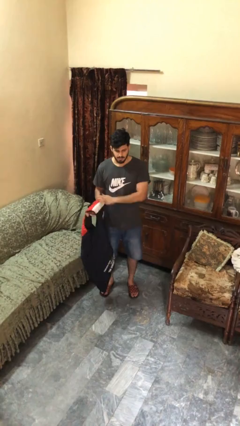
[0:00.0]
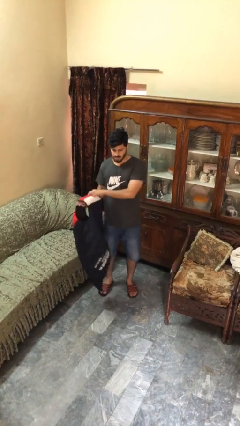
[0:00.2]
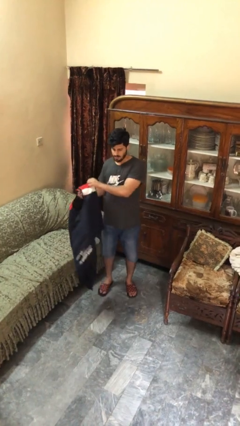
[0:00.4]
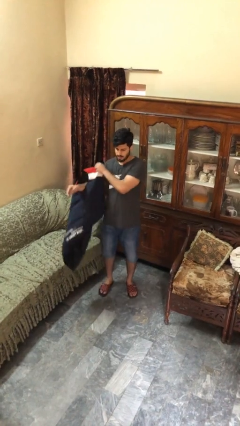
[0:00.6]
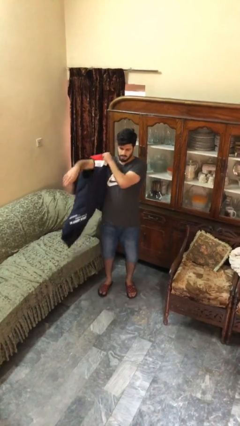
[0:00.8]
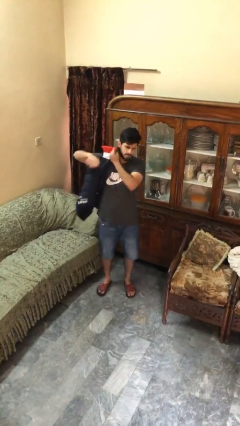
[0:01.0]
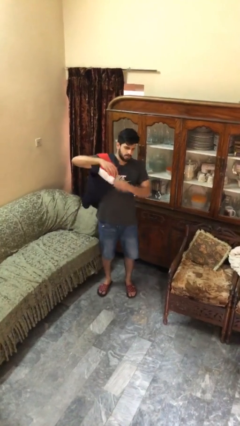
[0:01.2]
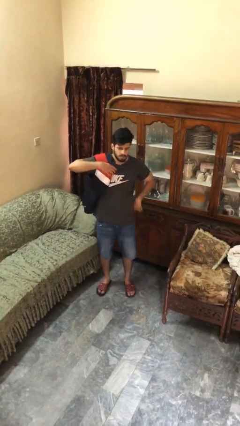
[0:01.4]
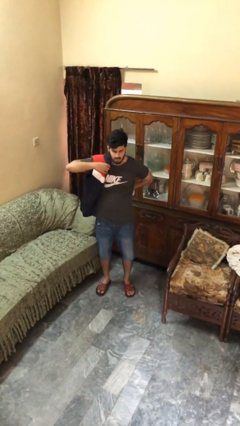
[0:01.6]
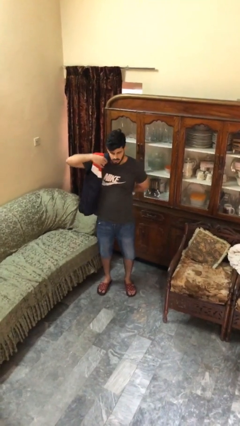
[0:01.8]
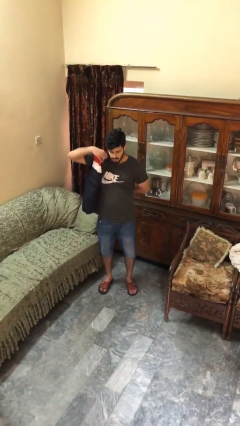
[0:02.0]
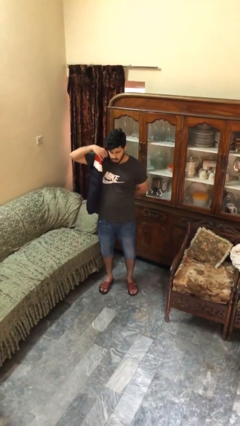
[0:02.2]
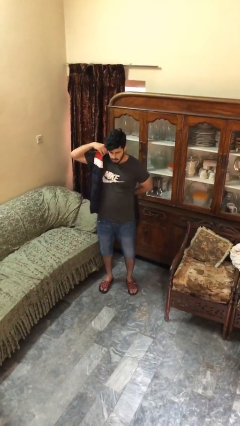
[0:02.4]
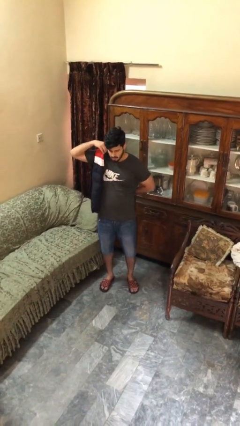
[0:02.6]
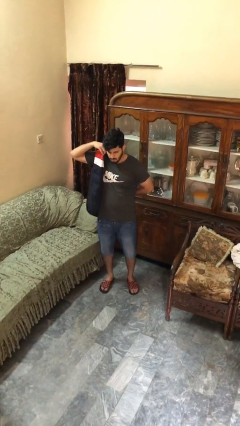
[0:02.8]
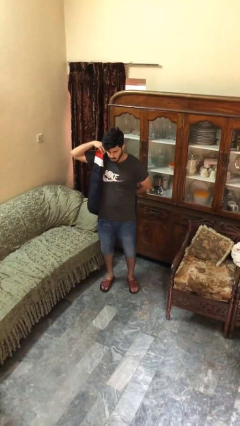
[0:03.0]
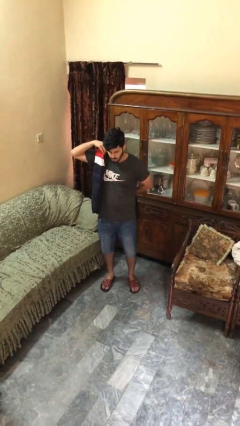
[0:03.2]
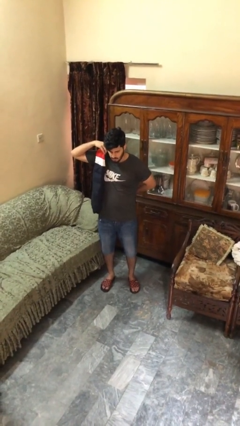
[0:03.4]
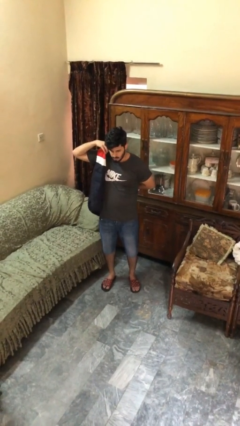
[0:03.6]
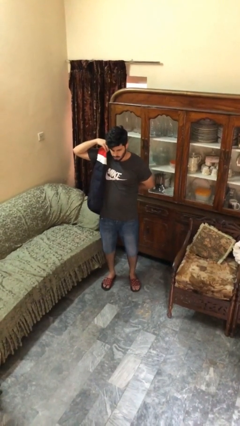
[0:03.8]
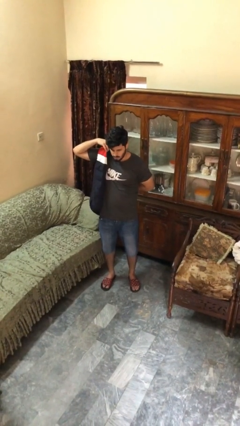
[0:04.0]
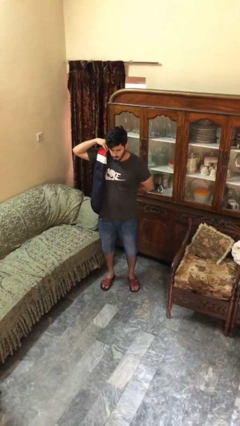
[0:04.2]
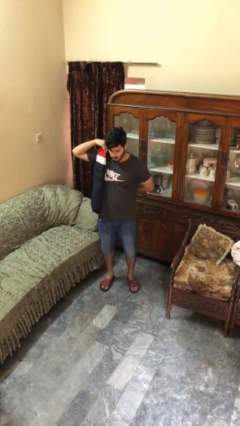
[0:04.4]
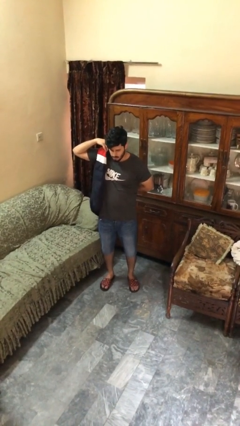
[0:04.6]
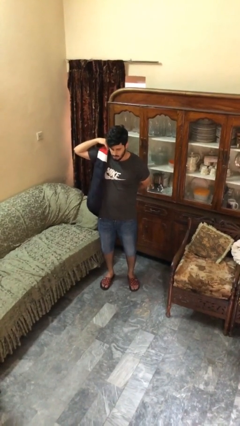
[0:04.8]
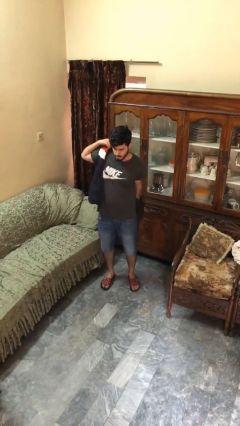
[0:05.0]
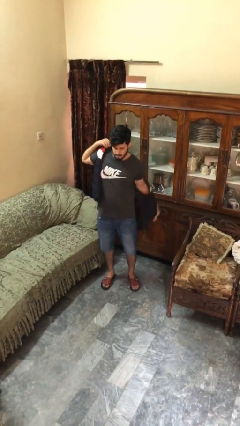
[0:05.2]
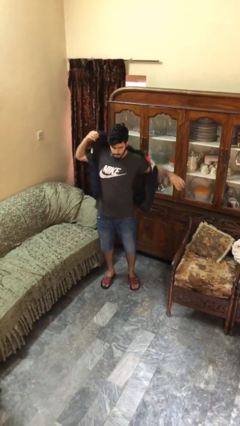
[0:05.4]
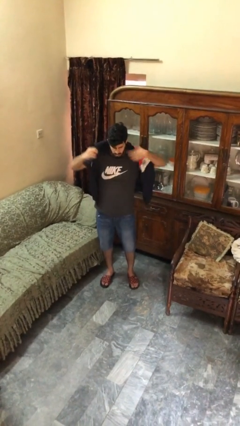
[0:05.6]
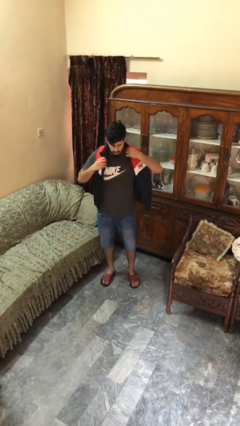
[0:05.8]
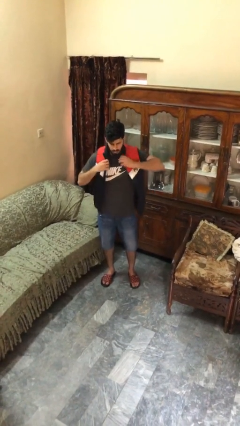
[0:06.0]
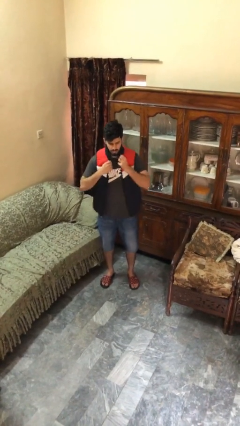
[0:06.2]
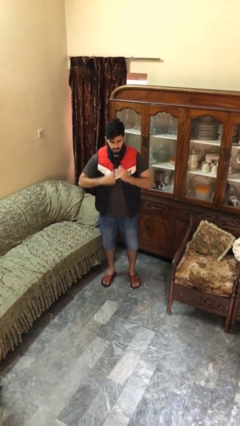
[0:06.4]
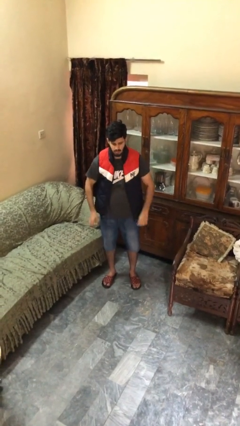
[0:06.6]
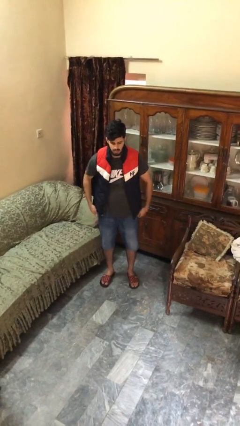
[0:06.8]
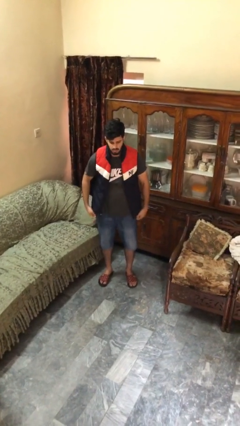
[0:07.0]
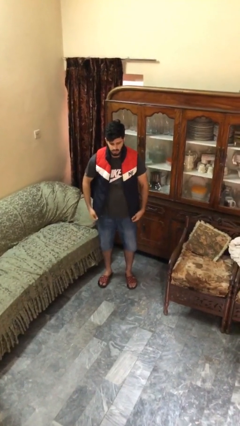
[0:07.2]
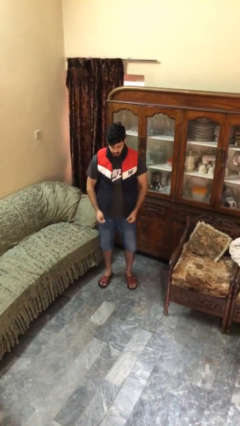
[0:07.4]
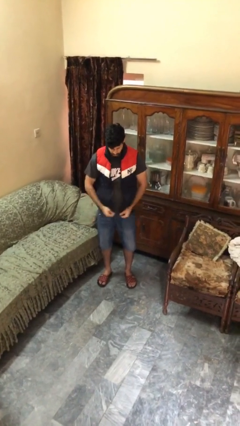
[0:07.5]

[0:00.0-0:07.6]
person puts on jacket

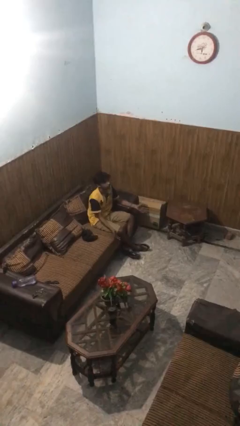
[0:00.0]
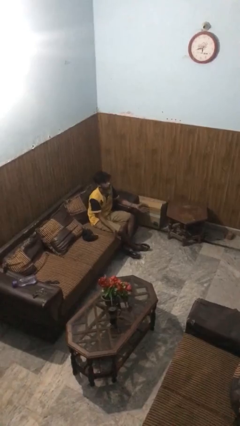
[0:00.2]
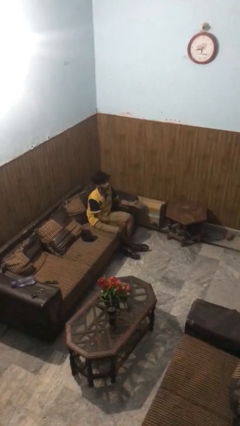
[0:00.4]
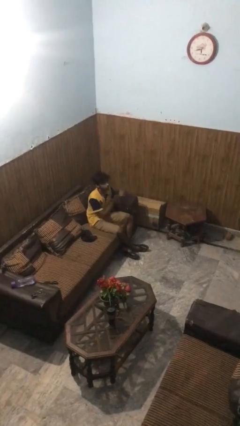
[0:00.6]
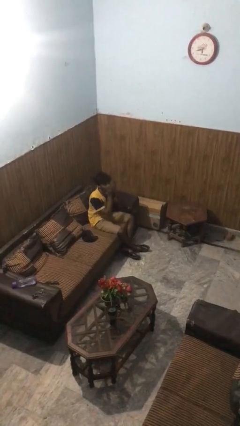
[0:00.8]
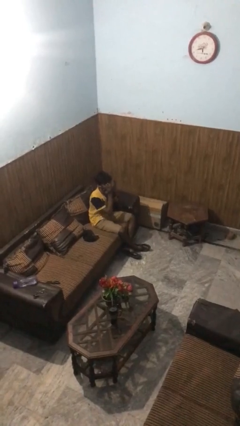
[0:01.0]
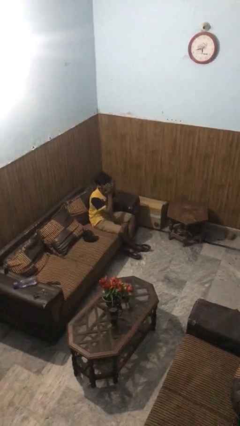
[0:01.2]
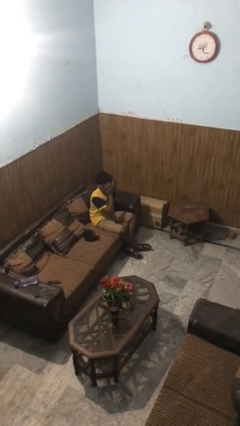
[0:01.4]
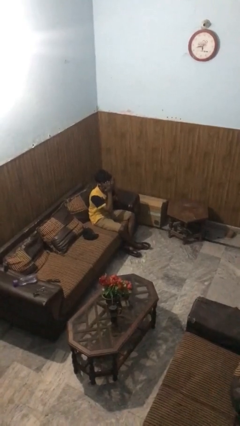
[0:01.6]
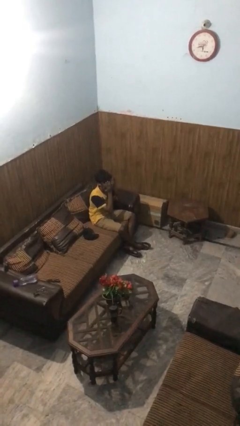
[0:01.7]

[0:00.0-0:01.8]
person covers face with hands

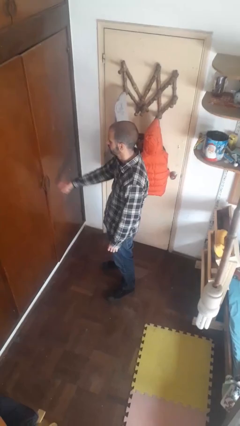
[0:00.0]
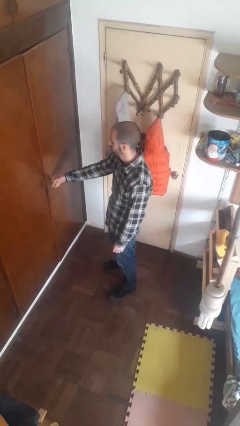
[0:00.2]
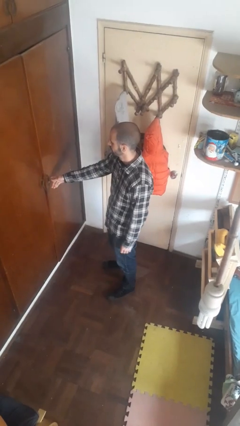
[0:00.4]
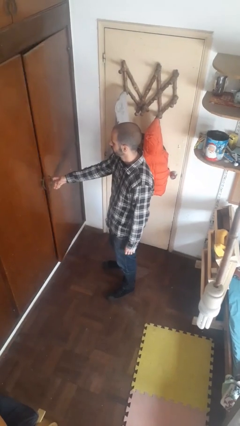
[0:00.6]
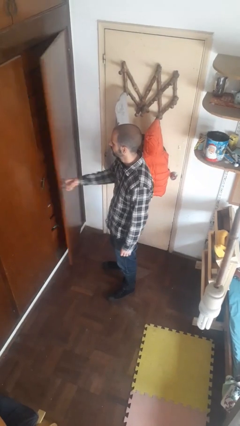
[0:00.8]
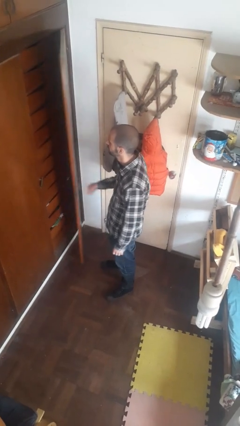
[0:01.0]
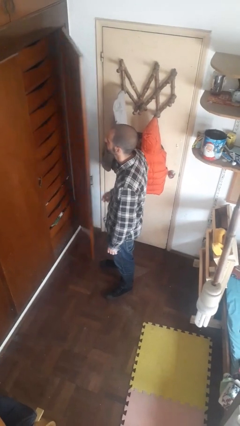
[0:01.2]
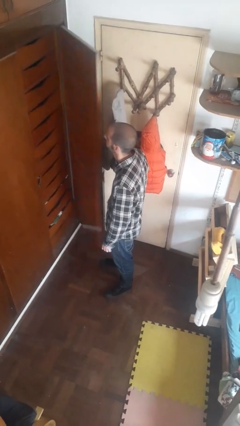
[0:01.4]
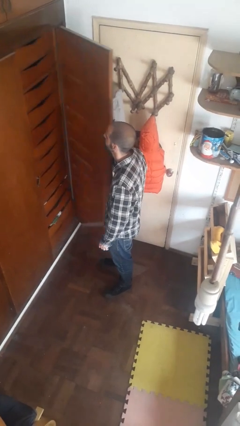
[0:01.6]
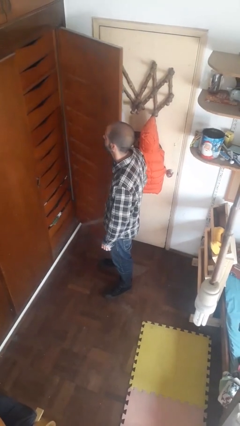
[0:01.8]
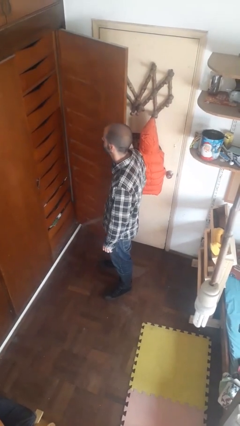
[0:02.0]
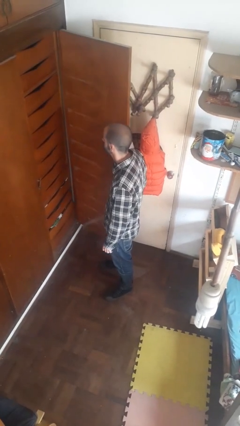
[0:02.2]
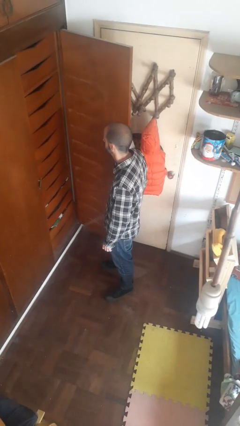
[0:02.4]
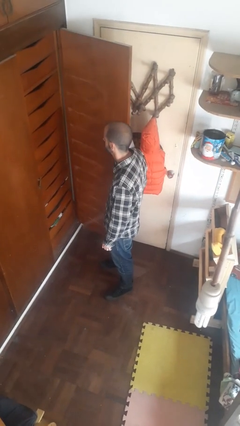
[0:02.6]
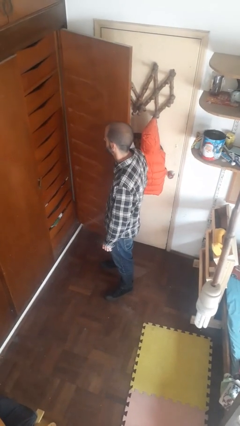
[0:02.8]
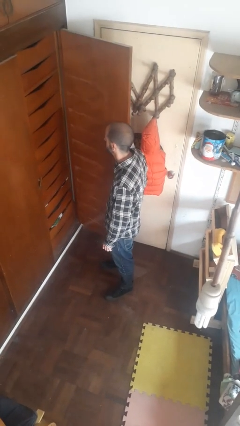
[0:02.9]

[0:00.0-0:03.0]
person opens closet door

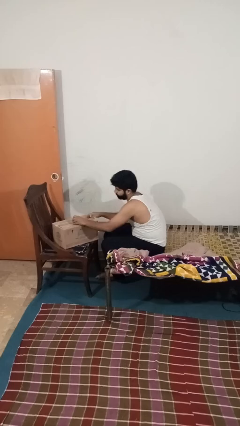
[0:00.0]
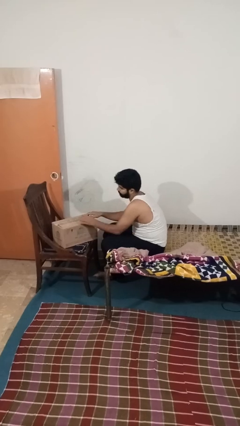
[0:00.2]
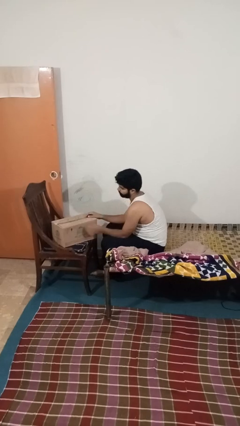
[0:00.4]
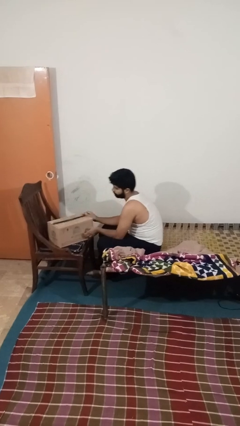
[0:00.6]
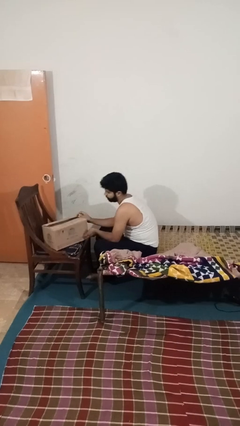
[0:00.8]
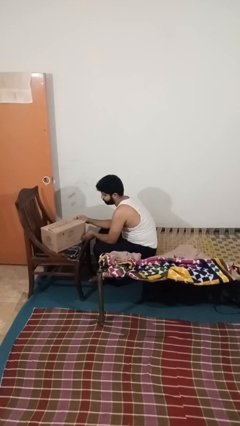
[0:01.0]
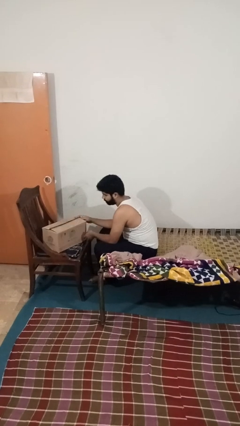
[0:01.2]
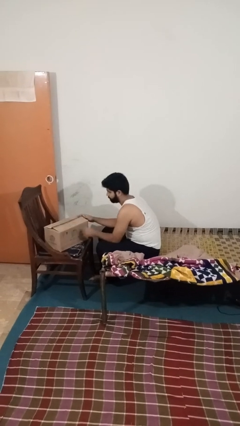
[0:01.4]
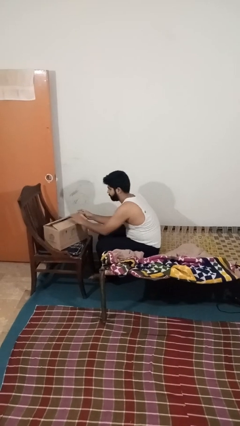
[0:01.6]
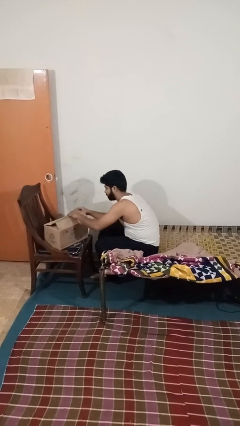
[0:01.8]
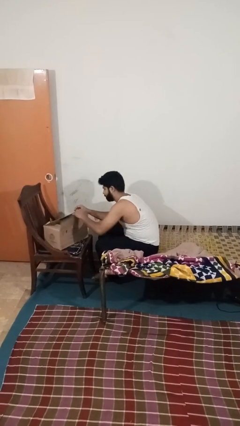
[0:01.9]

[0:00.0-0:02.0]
person closes box

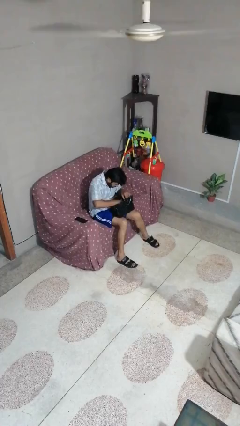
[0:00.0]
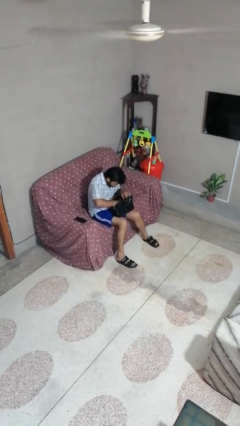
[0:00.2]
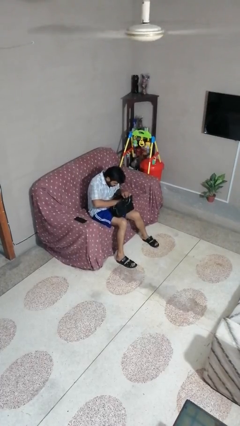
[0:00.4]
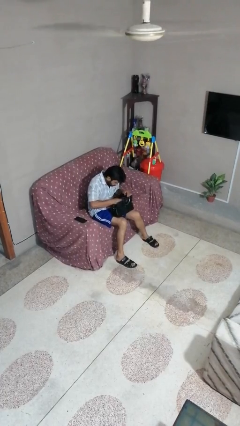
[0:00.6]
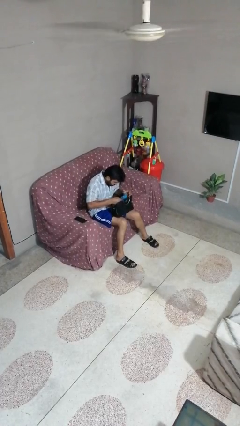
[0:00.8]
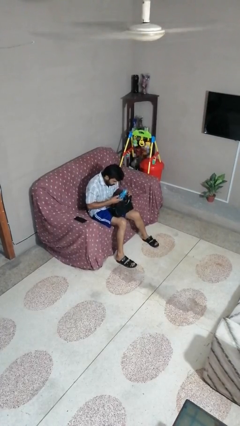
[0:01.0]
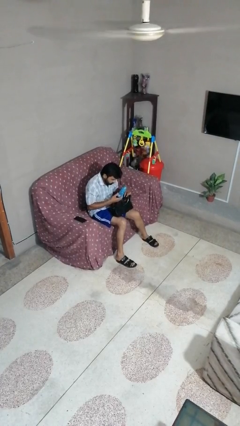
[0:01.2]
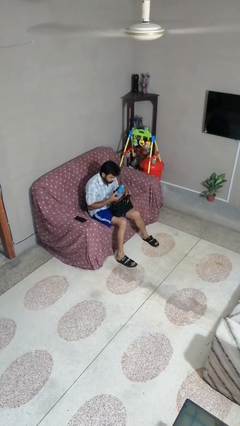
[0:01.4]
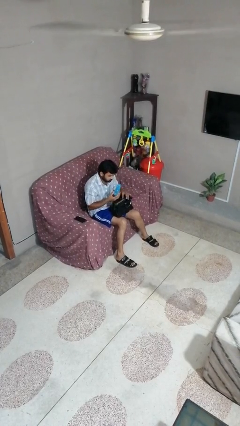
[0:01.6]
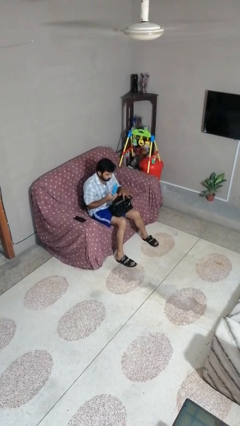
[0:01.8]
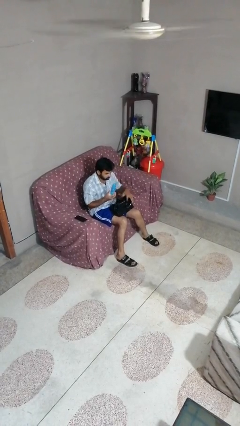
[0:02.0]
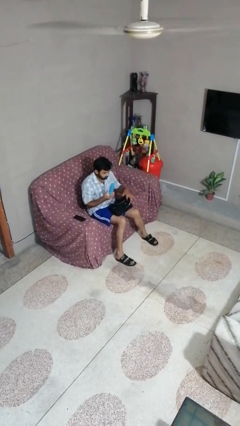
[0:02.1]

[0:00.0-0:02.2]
person takes object from purse

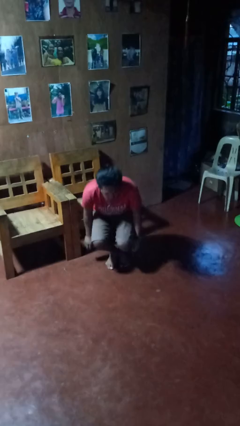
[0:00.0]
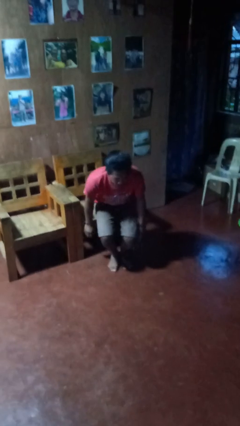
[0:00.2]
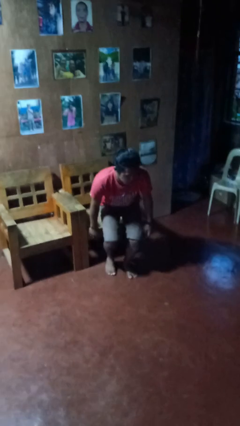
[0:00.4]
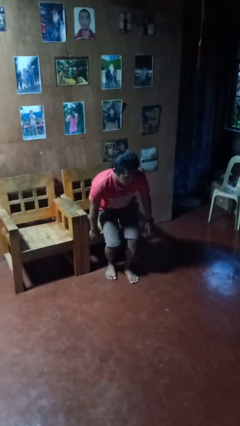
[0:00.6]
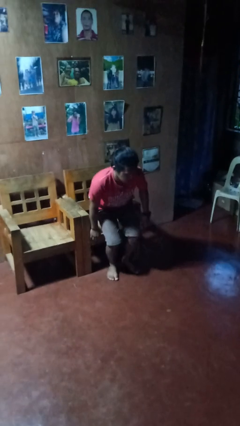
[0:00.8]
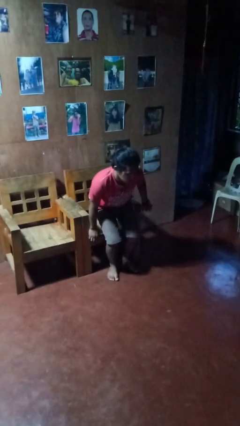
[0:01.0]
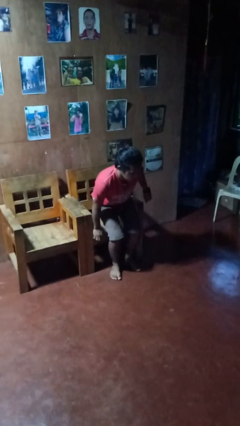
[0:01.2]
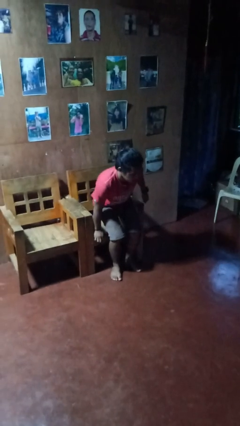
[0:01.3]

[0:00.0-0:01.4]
person stands up from floor
